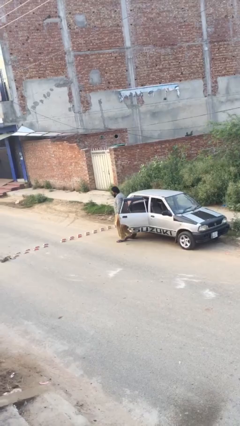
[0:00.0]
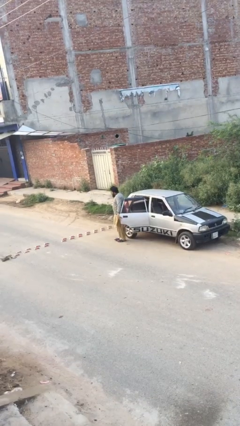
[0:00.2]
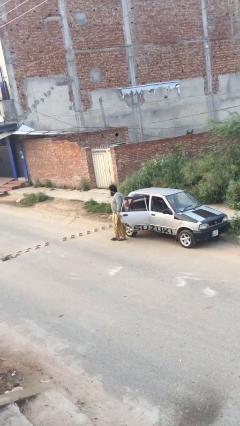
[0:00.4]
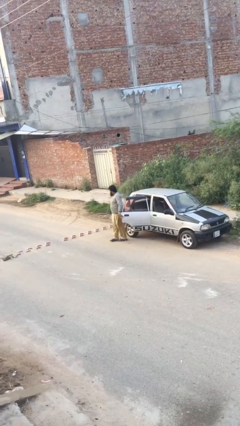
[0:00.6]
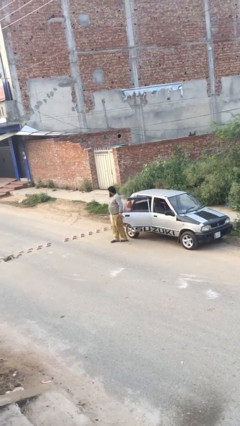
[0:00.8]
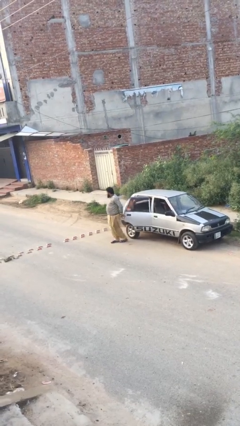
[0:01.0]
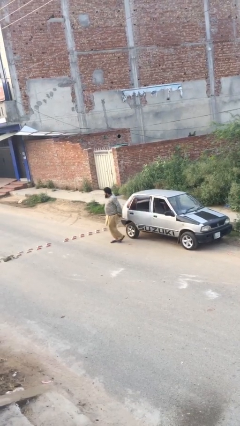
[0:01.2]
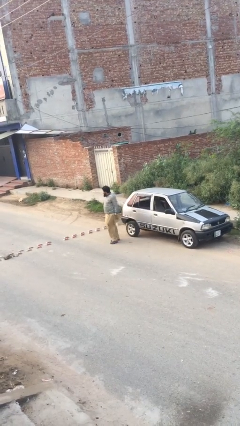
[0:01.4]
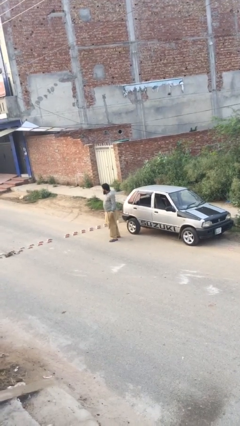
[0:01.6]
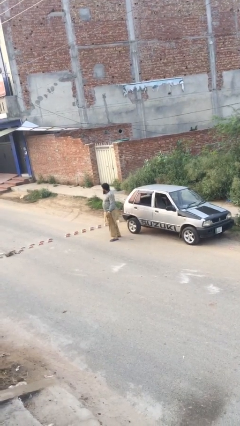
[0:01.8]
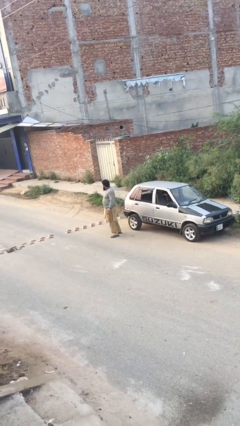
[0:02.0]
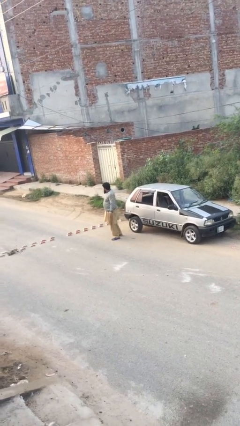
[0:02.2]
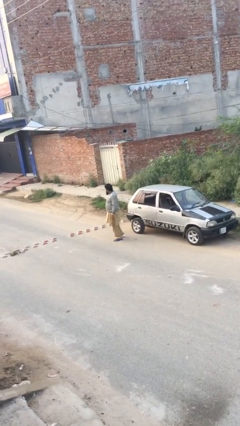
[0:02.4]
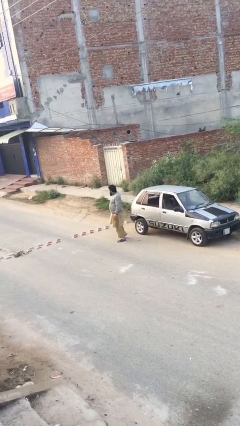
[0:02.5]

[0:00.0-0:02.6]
person closes car door

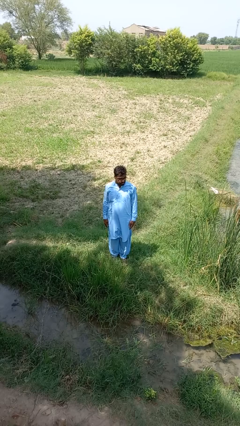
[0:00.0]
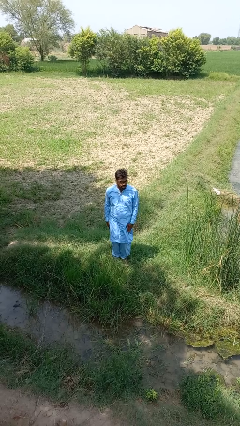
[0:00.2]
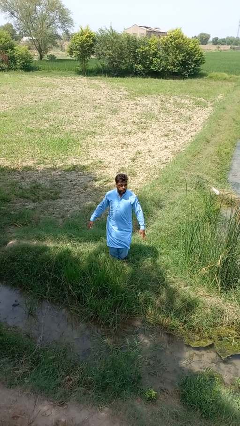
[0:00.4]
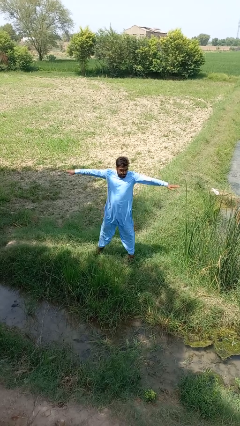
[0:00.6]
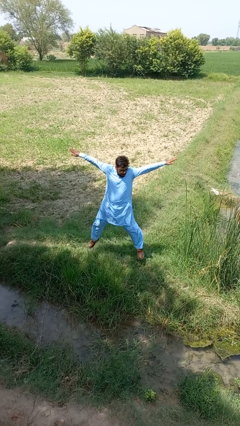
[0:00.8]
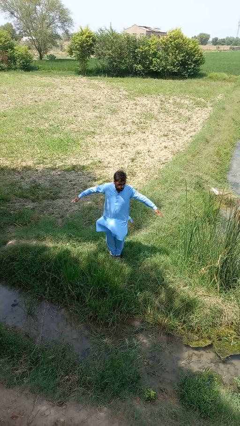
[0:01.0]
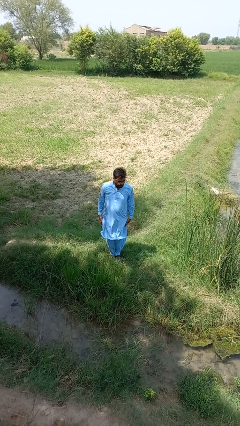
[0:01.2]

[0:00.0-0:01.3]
person exercises with jumping jacks

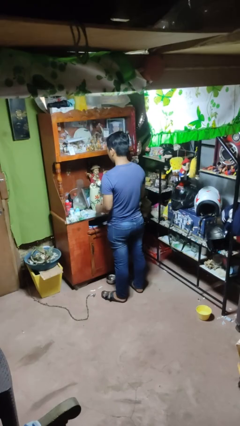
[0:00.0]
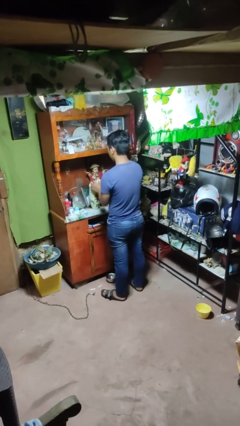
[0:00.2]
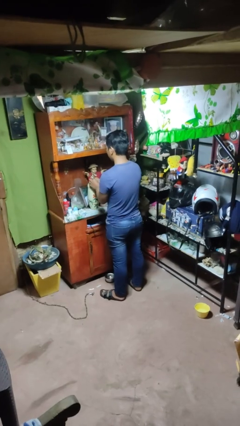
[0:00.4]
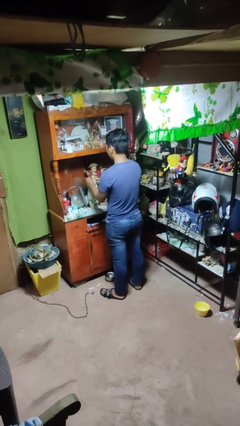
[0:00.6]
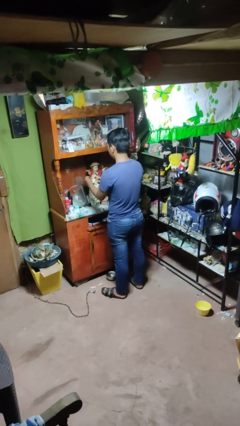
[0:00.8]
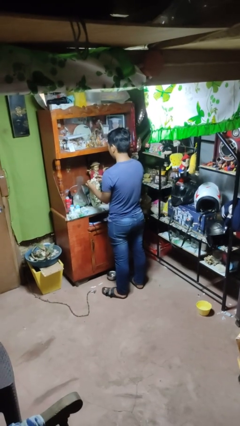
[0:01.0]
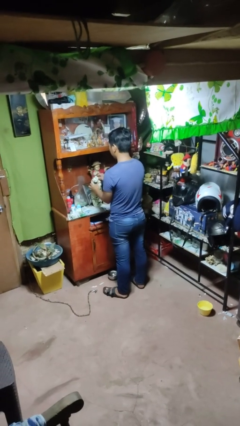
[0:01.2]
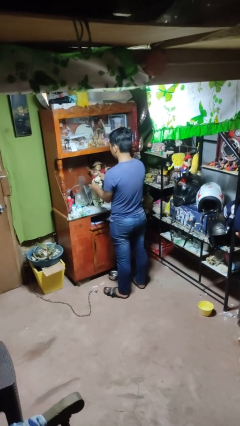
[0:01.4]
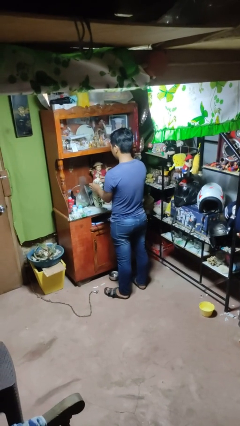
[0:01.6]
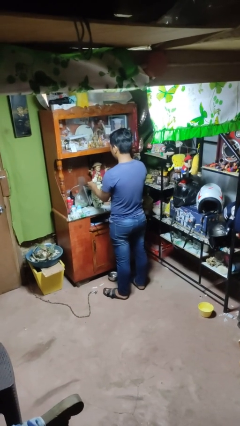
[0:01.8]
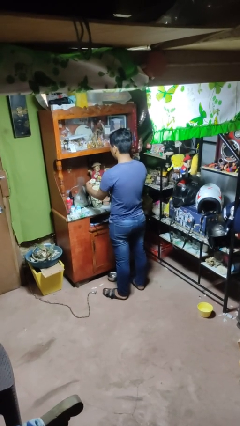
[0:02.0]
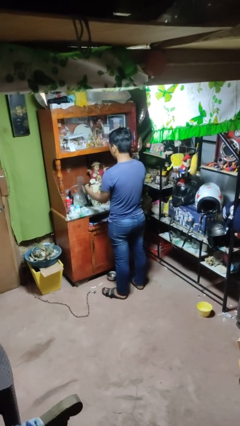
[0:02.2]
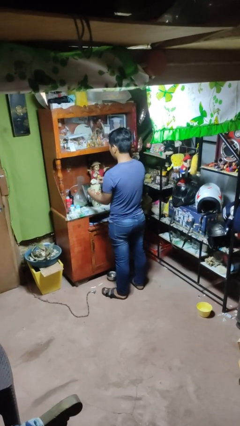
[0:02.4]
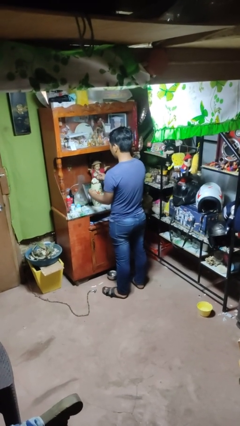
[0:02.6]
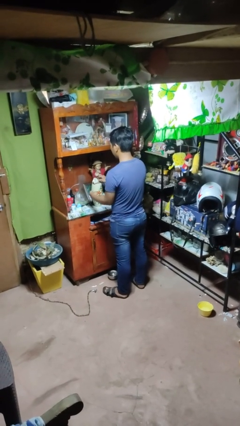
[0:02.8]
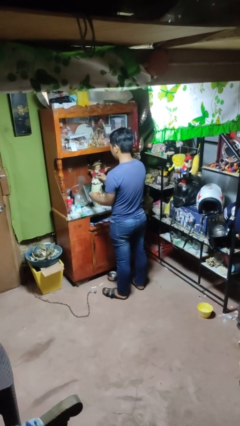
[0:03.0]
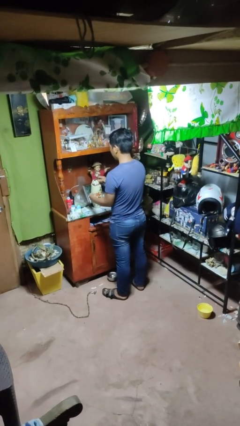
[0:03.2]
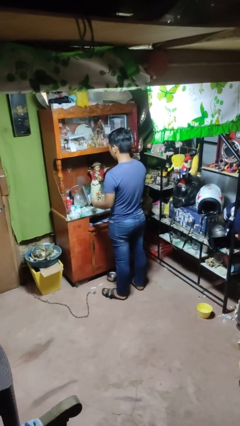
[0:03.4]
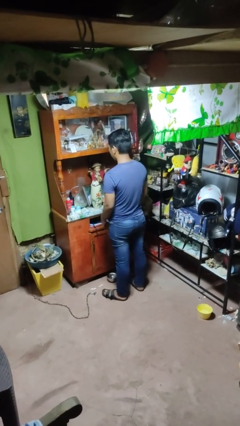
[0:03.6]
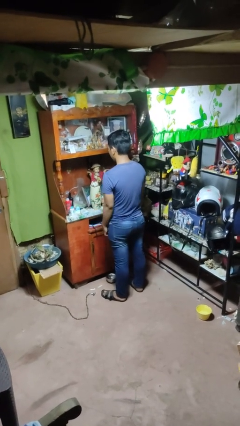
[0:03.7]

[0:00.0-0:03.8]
person arranges flowers in vase

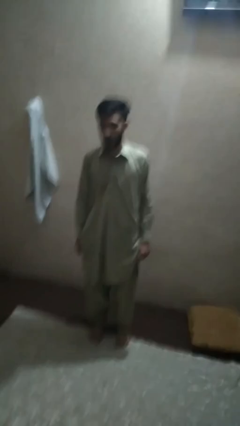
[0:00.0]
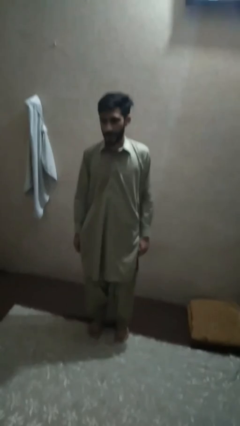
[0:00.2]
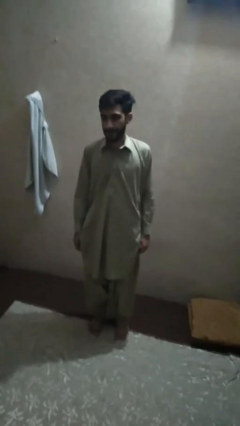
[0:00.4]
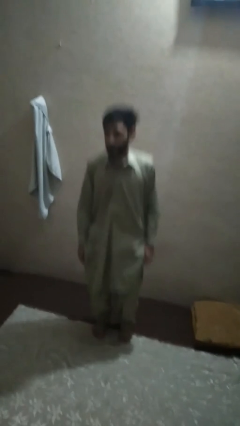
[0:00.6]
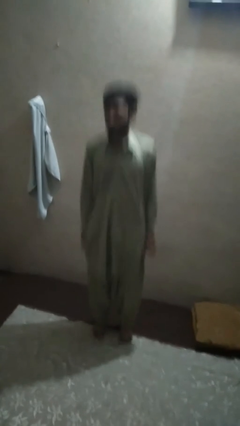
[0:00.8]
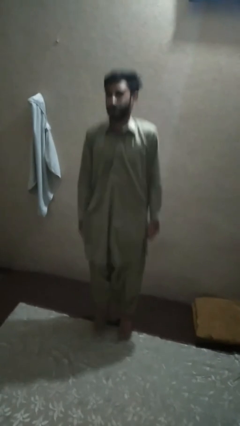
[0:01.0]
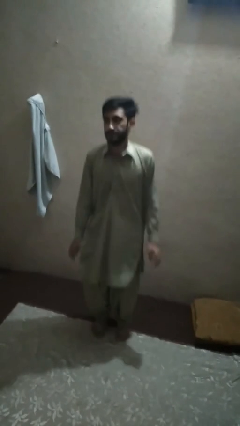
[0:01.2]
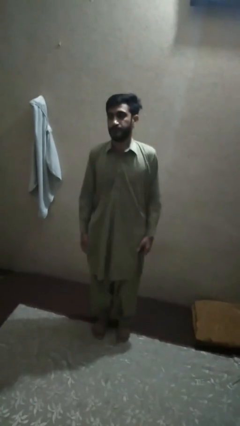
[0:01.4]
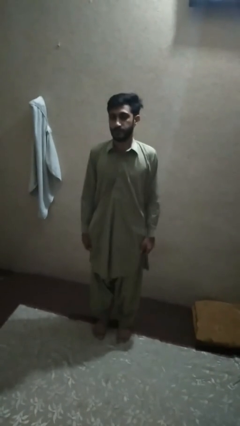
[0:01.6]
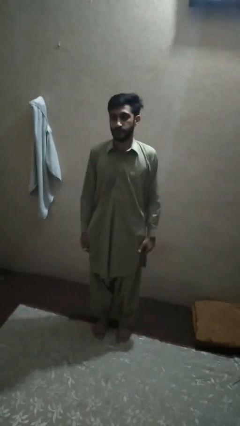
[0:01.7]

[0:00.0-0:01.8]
person jumps

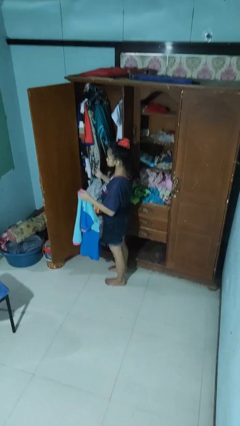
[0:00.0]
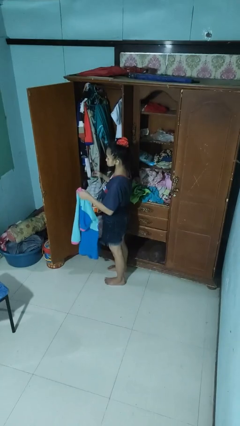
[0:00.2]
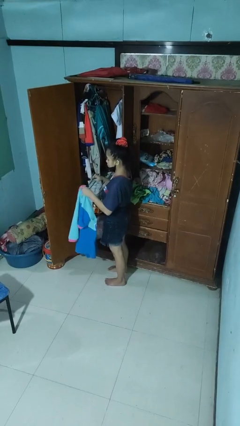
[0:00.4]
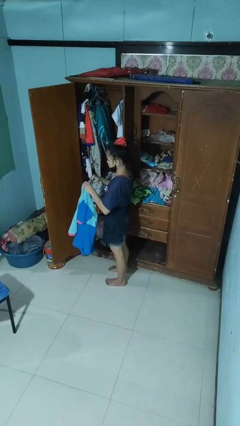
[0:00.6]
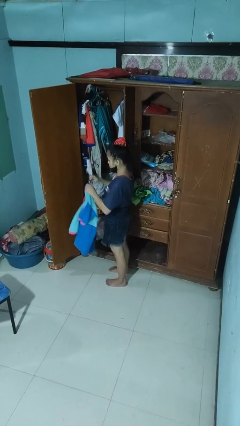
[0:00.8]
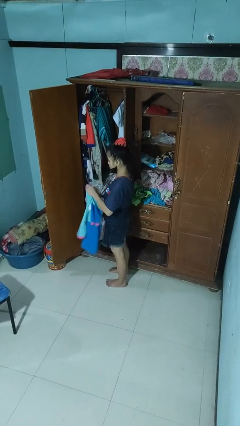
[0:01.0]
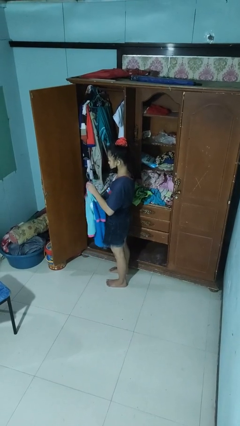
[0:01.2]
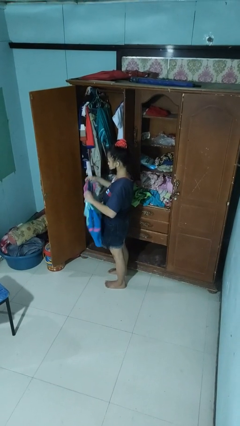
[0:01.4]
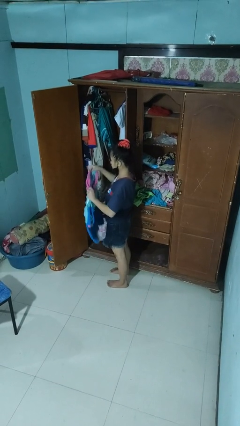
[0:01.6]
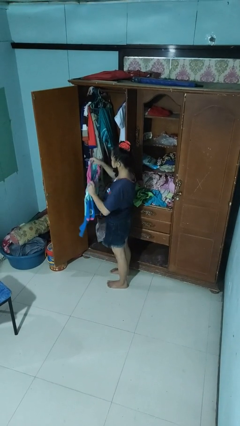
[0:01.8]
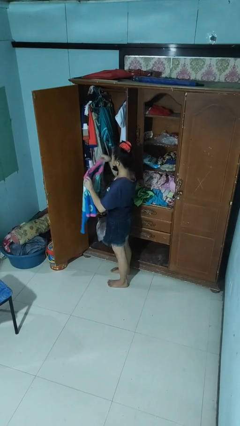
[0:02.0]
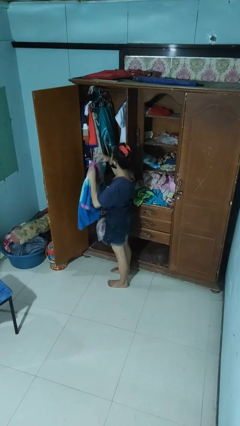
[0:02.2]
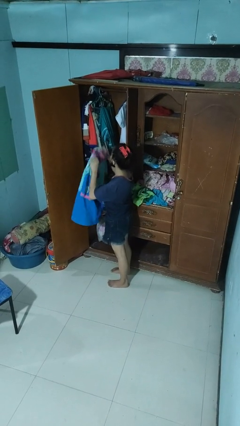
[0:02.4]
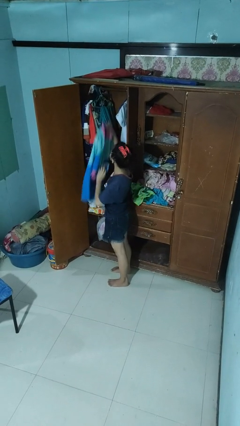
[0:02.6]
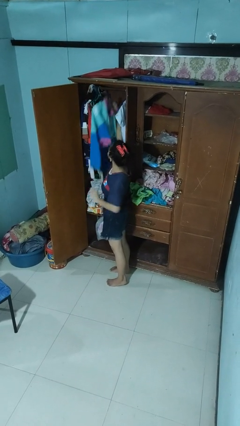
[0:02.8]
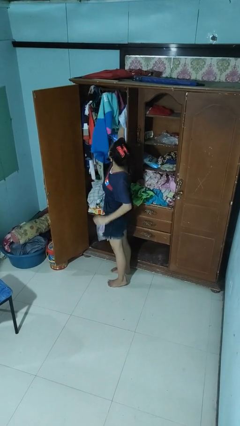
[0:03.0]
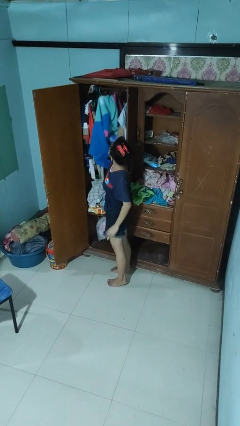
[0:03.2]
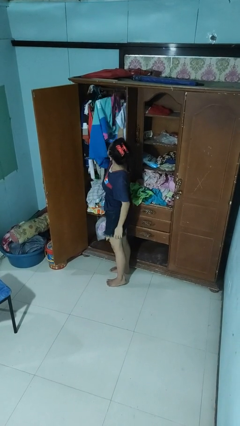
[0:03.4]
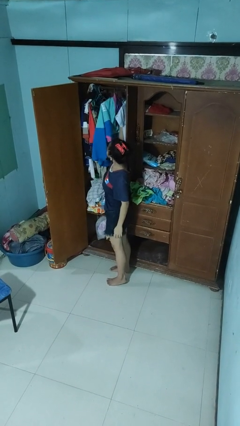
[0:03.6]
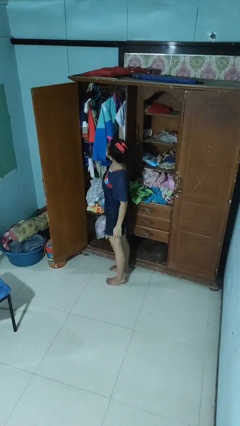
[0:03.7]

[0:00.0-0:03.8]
person puts clothes into closet

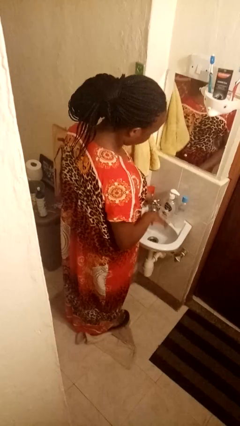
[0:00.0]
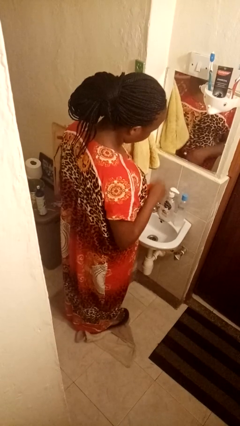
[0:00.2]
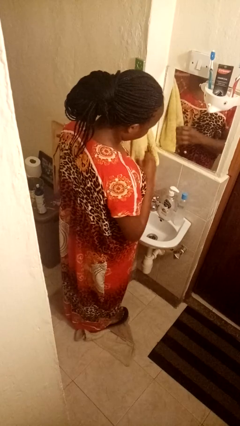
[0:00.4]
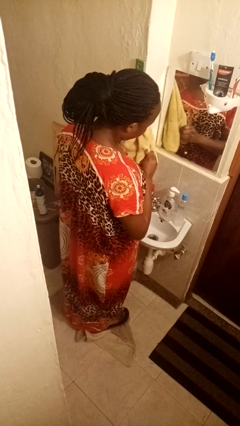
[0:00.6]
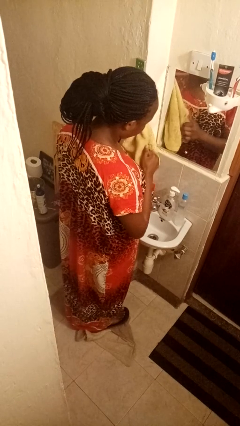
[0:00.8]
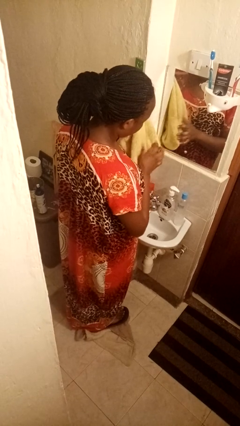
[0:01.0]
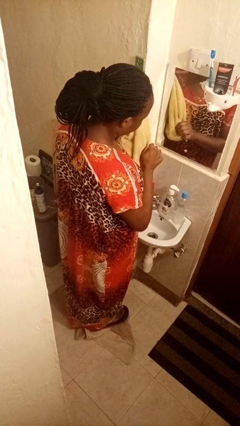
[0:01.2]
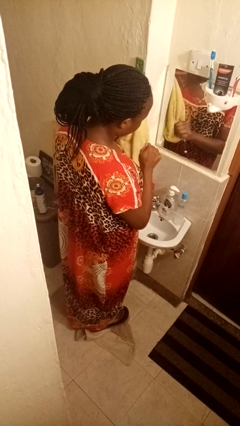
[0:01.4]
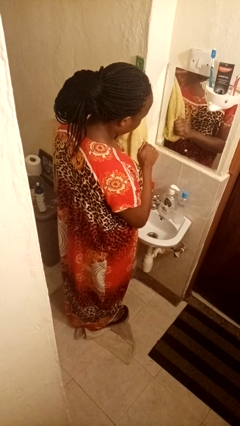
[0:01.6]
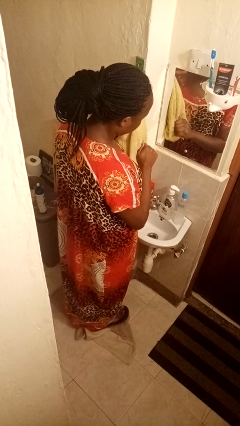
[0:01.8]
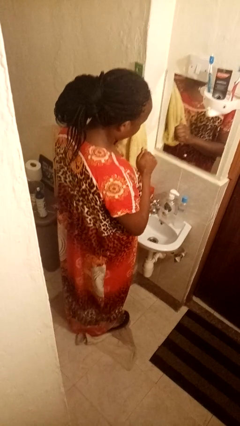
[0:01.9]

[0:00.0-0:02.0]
person dries hands with towel

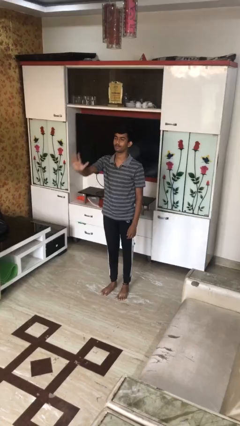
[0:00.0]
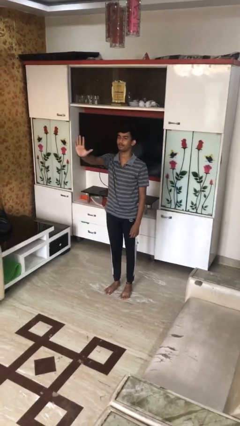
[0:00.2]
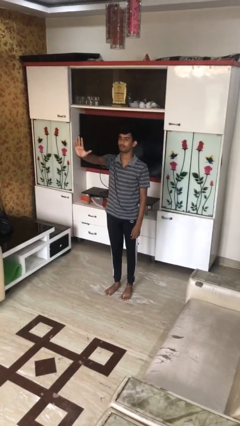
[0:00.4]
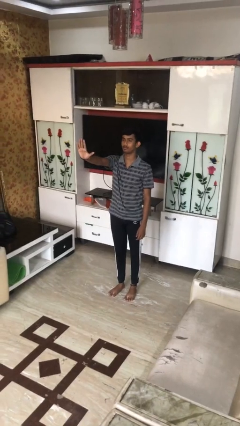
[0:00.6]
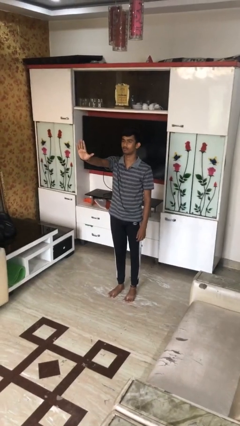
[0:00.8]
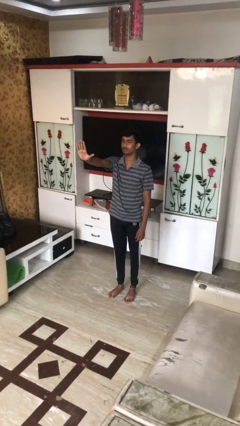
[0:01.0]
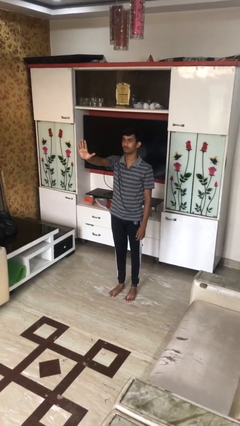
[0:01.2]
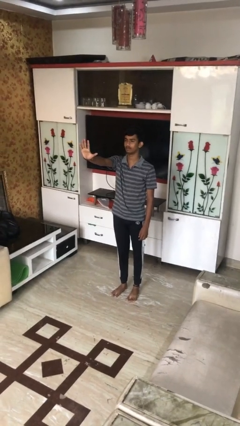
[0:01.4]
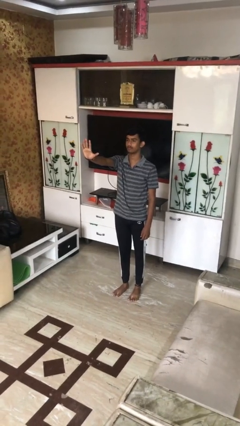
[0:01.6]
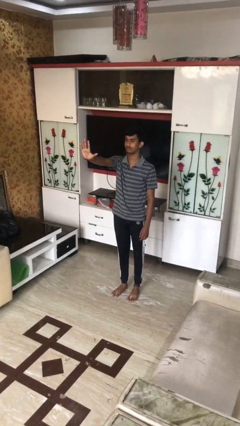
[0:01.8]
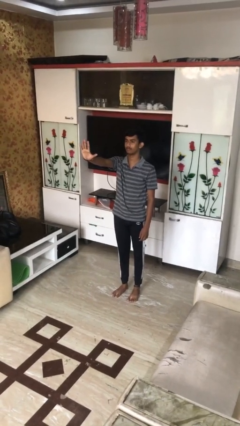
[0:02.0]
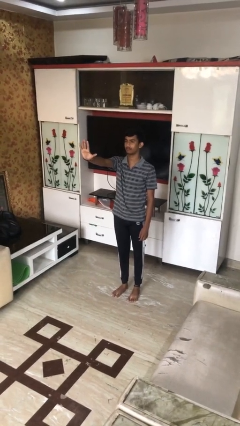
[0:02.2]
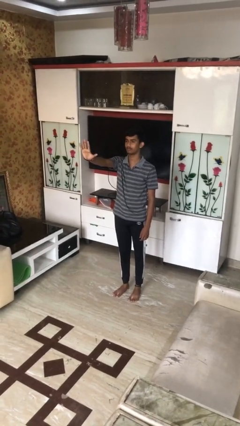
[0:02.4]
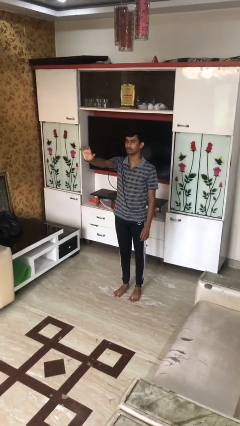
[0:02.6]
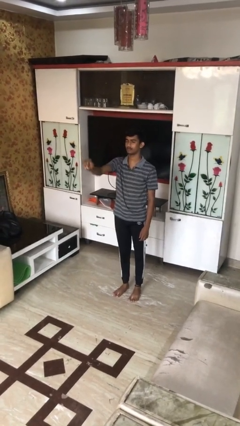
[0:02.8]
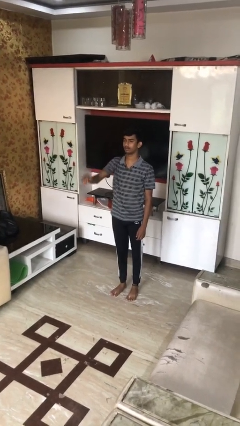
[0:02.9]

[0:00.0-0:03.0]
person gestures number five
